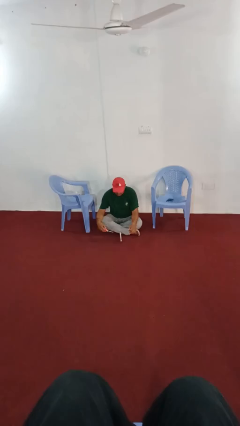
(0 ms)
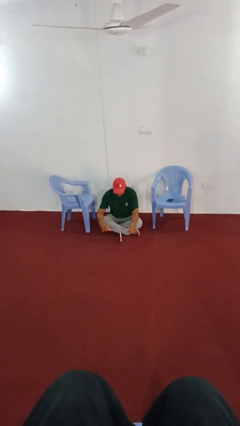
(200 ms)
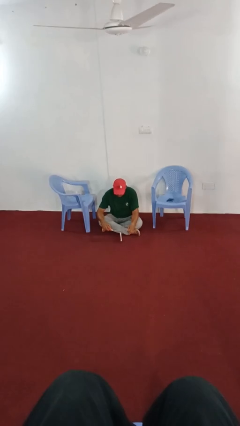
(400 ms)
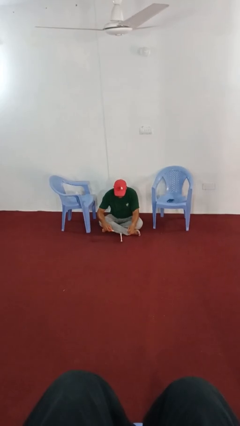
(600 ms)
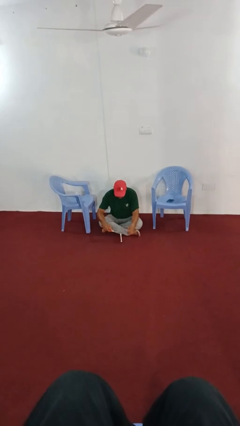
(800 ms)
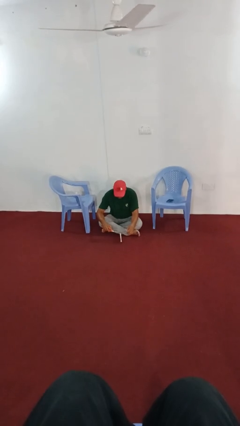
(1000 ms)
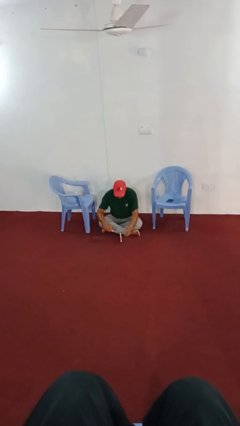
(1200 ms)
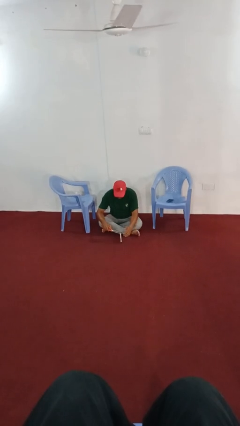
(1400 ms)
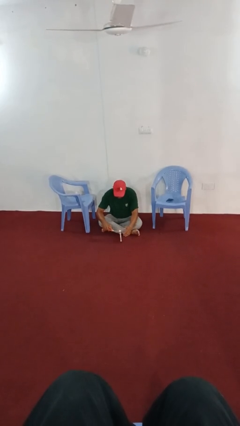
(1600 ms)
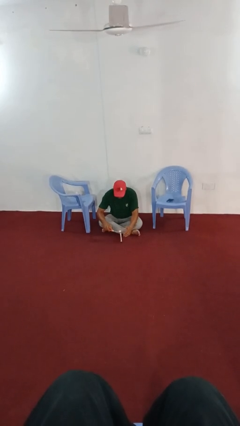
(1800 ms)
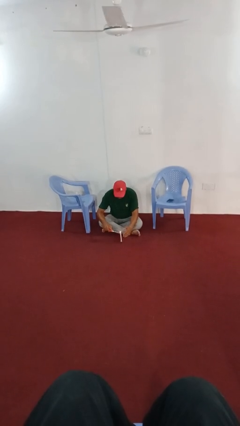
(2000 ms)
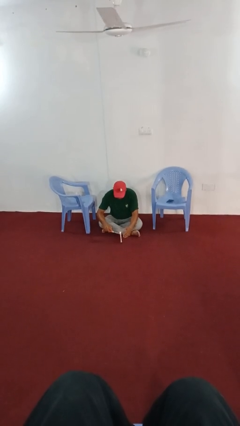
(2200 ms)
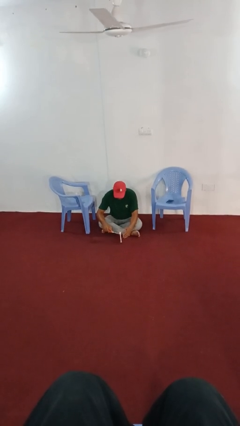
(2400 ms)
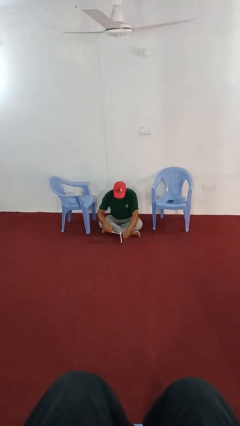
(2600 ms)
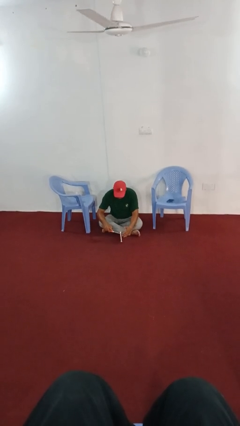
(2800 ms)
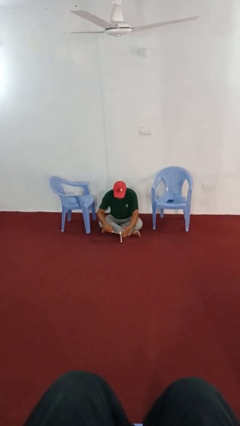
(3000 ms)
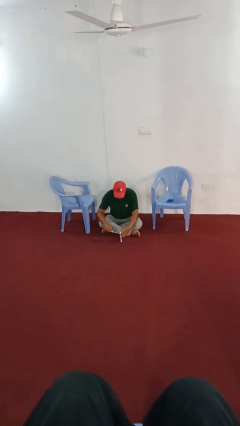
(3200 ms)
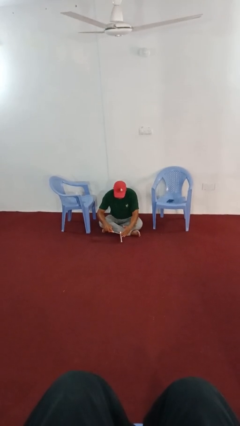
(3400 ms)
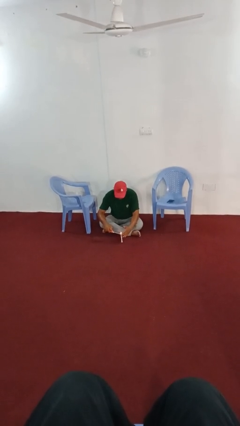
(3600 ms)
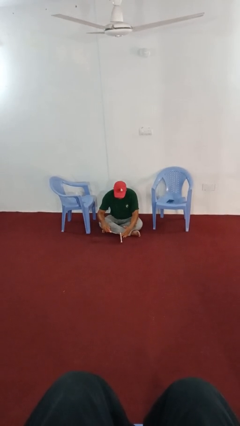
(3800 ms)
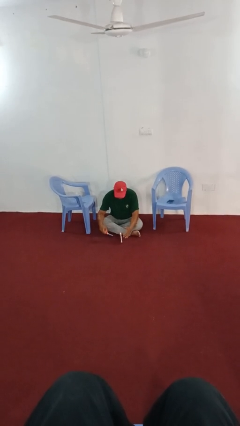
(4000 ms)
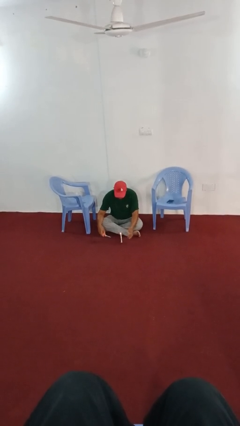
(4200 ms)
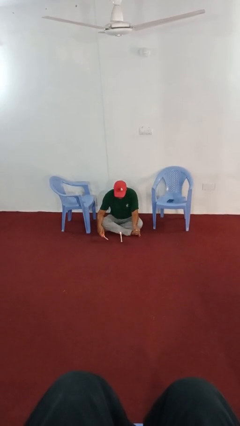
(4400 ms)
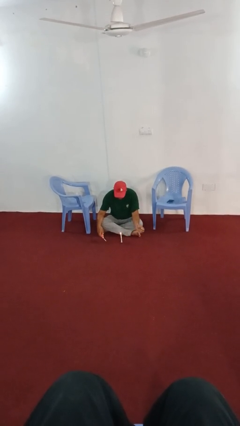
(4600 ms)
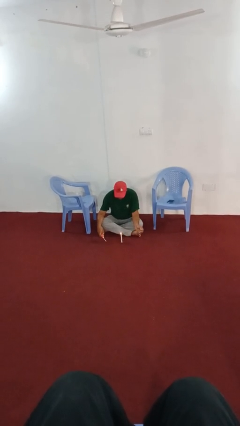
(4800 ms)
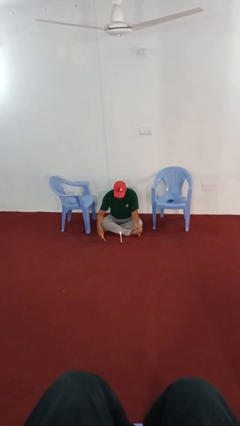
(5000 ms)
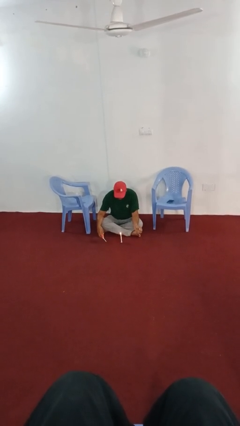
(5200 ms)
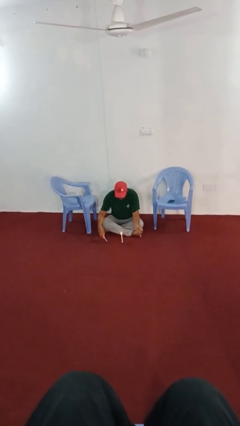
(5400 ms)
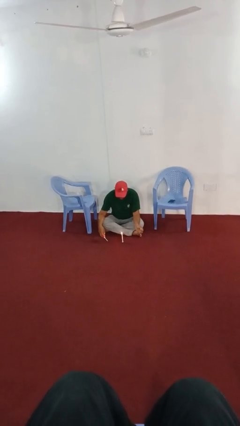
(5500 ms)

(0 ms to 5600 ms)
person lights candle

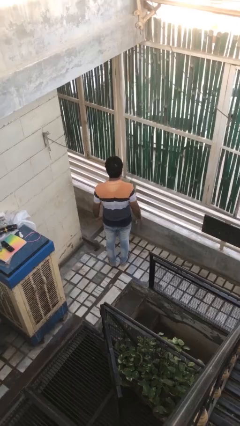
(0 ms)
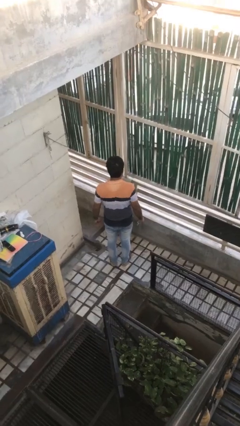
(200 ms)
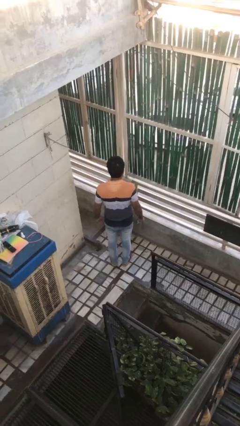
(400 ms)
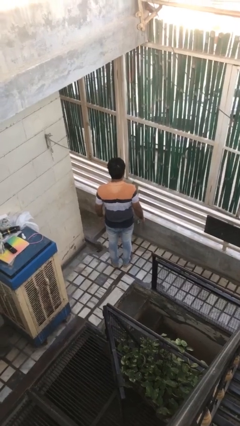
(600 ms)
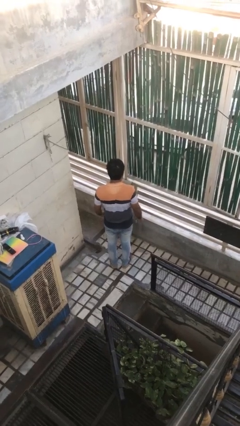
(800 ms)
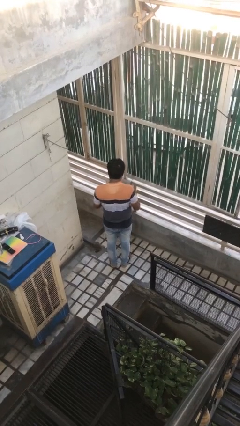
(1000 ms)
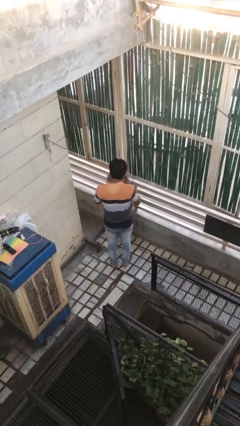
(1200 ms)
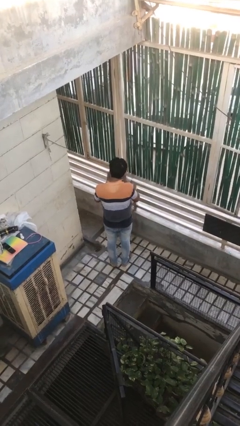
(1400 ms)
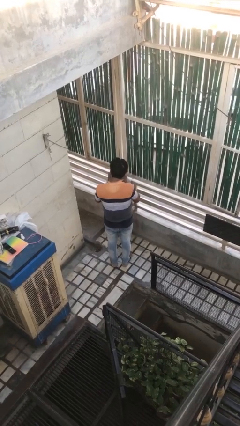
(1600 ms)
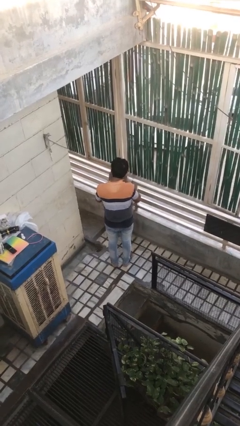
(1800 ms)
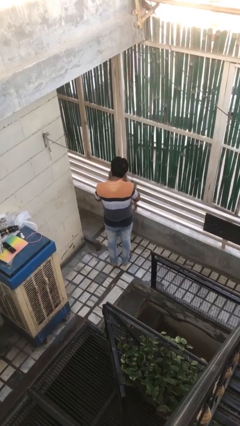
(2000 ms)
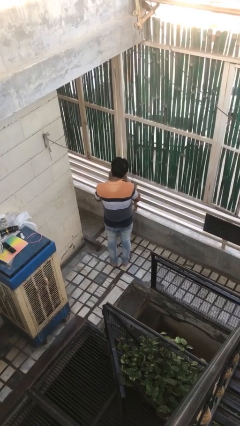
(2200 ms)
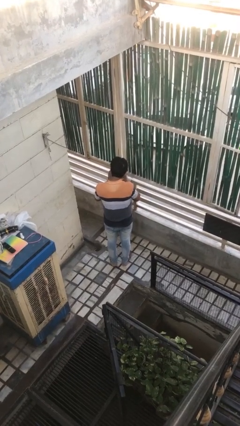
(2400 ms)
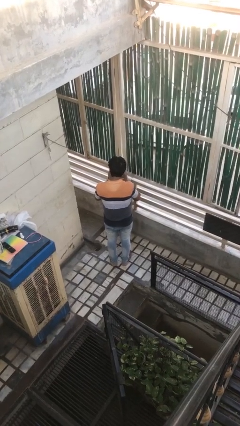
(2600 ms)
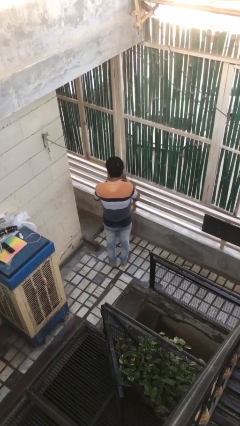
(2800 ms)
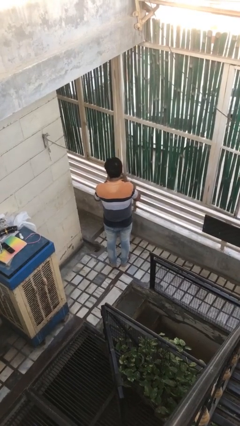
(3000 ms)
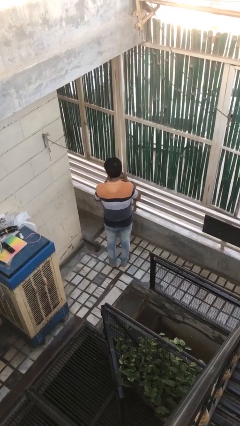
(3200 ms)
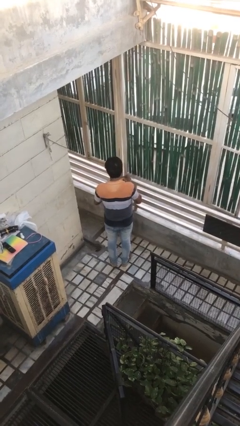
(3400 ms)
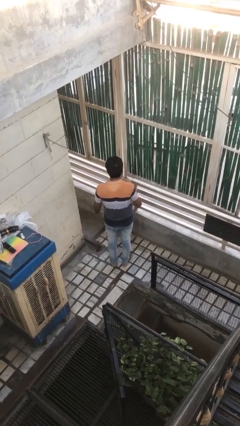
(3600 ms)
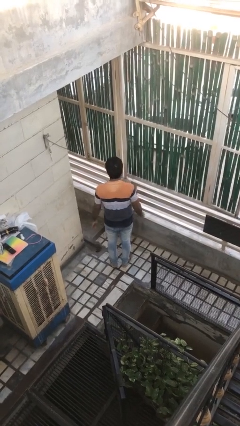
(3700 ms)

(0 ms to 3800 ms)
person clips fingernails

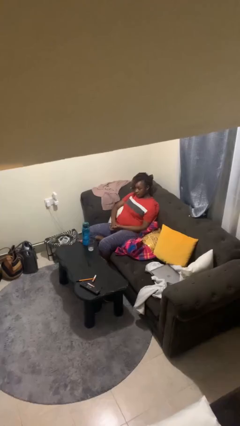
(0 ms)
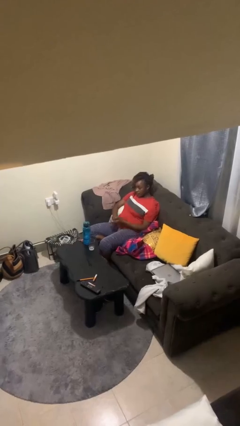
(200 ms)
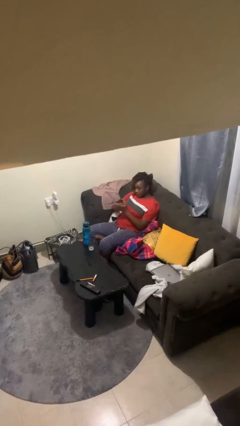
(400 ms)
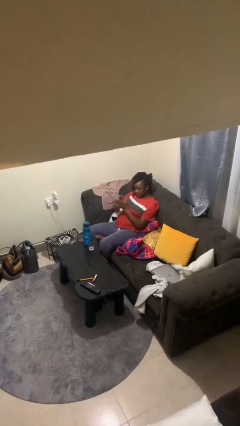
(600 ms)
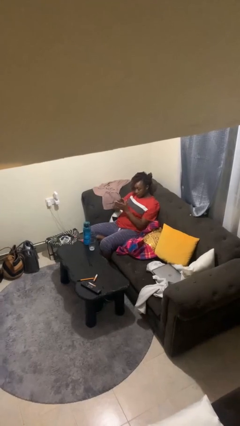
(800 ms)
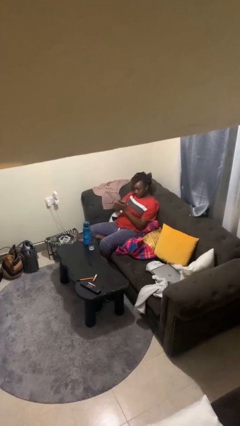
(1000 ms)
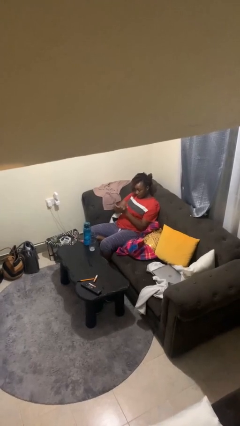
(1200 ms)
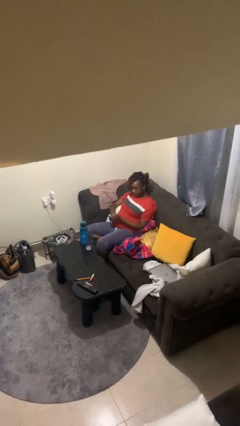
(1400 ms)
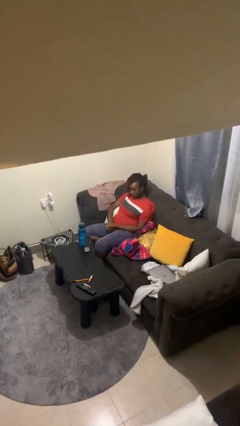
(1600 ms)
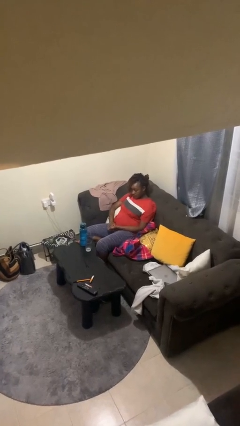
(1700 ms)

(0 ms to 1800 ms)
person claps hands

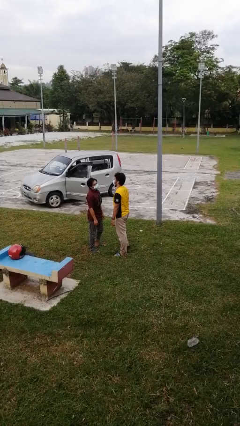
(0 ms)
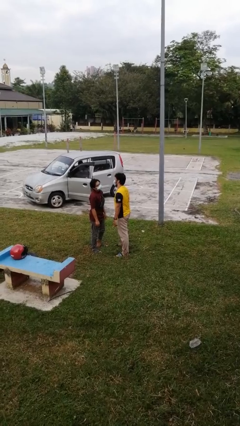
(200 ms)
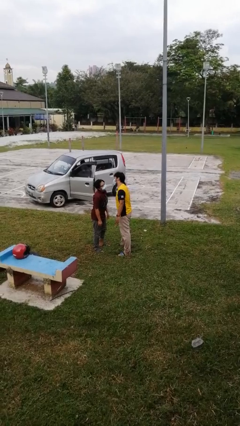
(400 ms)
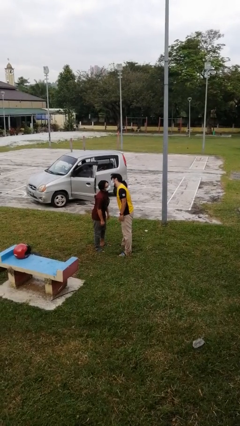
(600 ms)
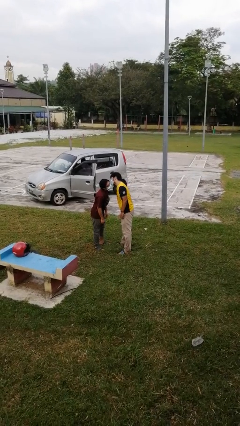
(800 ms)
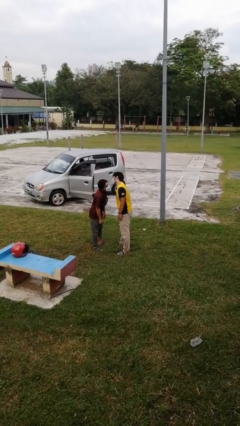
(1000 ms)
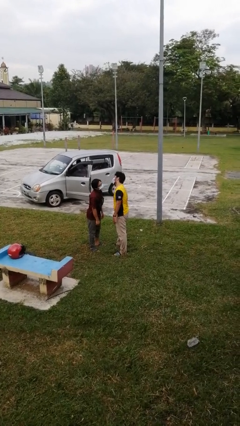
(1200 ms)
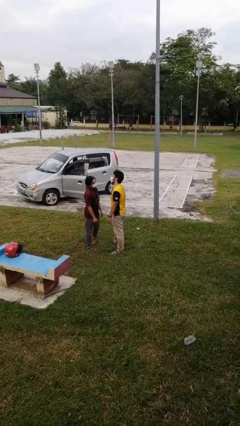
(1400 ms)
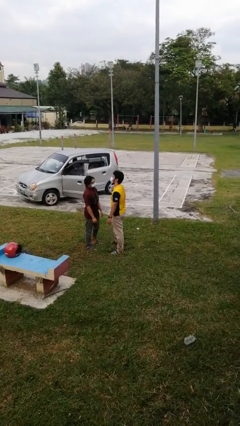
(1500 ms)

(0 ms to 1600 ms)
person kisses cheek of person

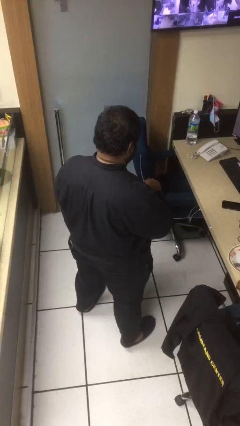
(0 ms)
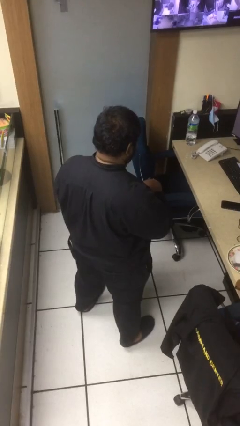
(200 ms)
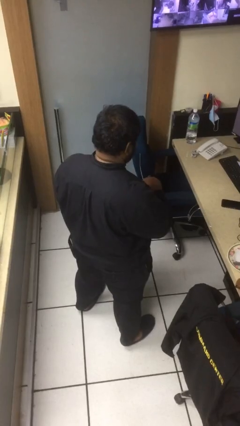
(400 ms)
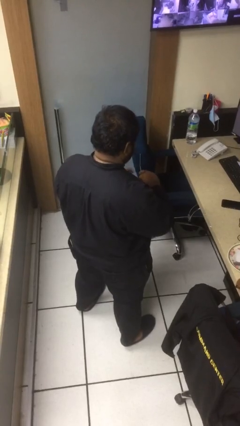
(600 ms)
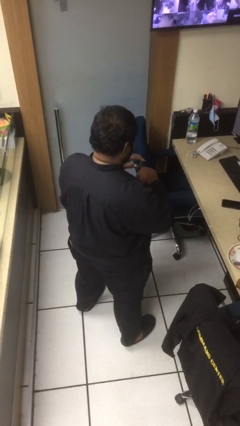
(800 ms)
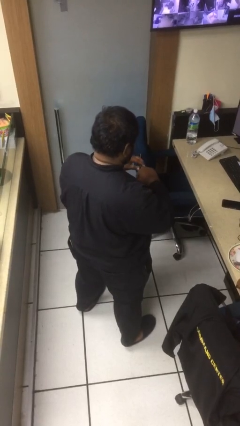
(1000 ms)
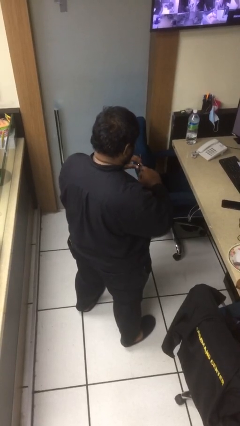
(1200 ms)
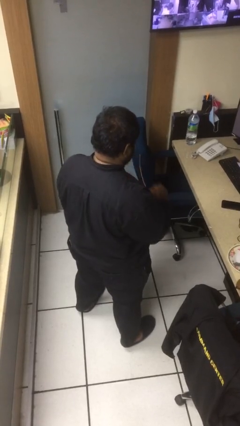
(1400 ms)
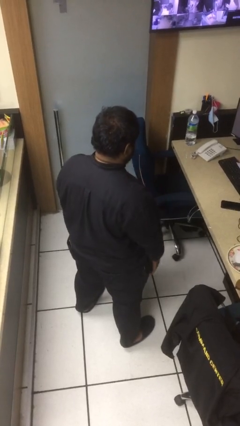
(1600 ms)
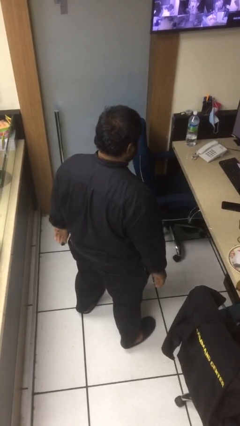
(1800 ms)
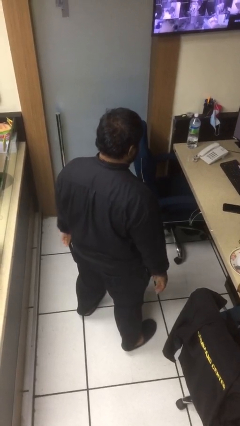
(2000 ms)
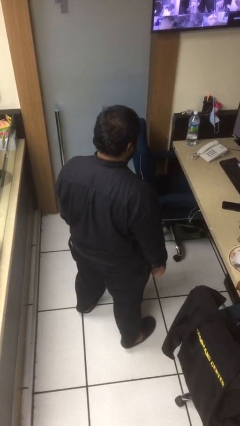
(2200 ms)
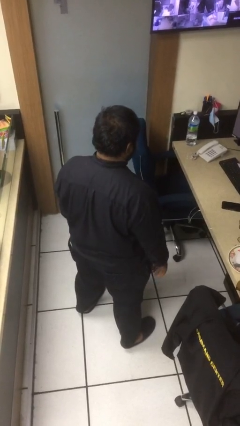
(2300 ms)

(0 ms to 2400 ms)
person takes off ring

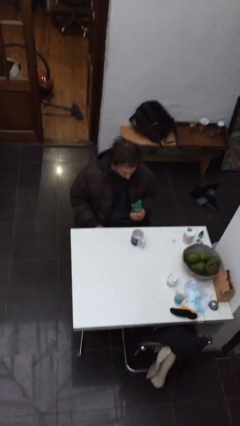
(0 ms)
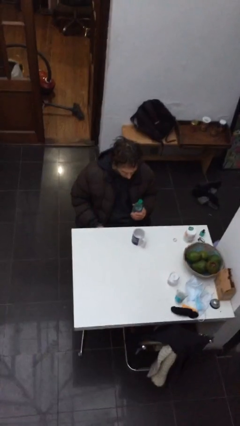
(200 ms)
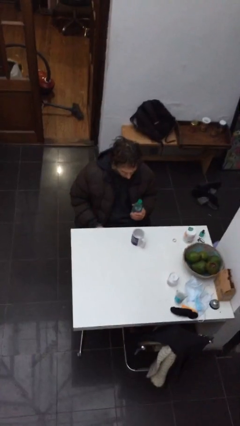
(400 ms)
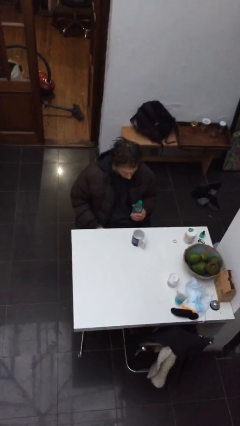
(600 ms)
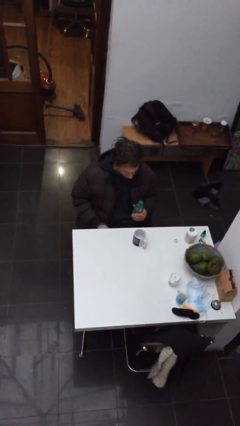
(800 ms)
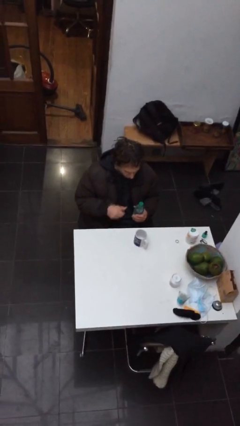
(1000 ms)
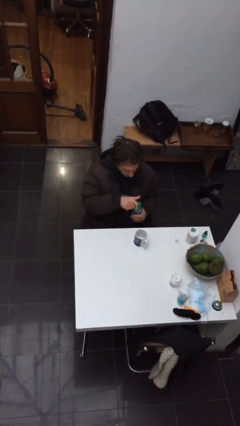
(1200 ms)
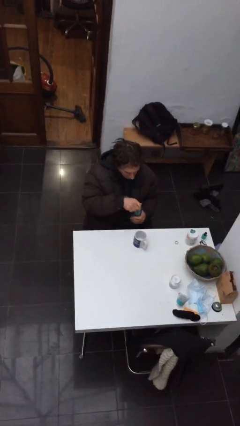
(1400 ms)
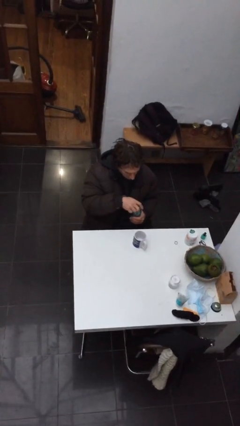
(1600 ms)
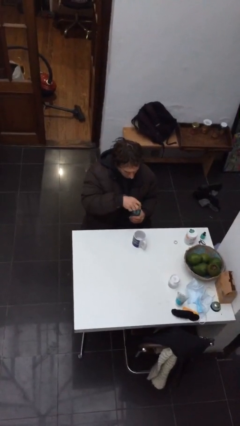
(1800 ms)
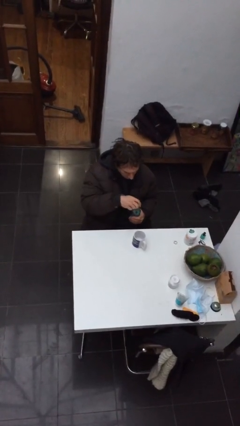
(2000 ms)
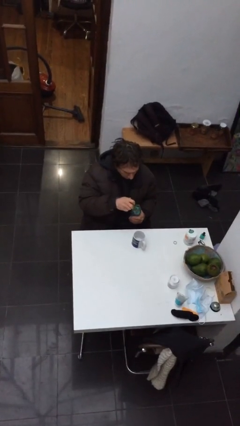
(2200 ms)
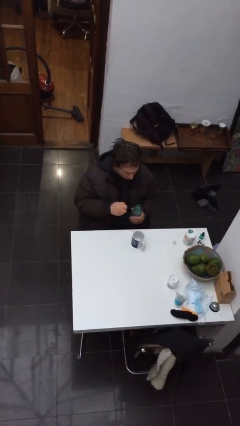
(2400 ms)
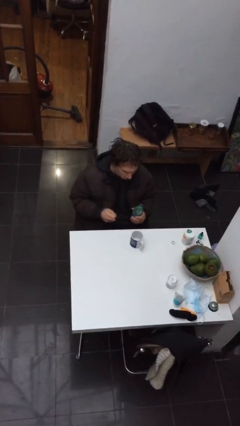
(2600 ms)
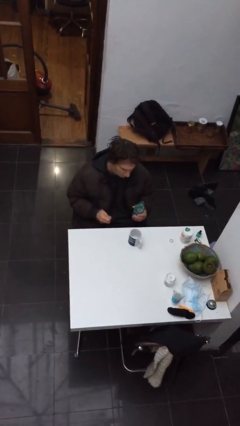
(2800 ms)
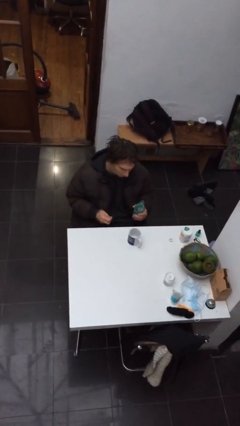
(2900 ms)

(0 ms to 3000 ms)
person unscrews lid from bottle
